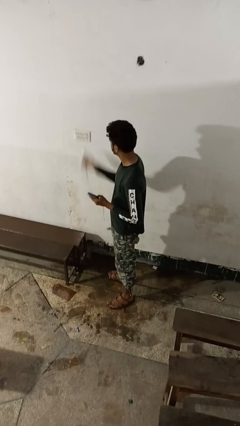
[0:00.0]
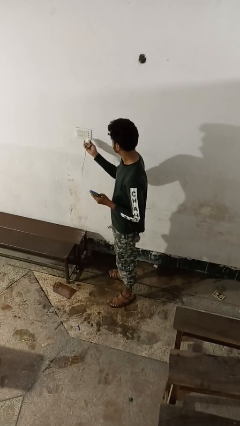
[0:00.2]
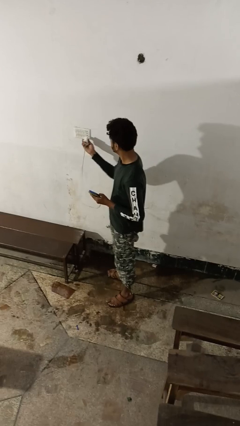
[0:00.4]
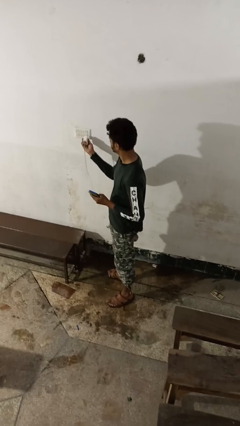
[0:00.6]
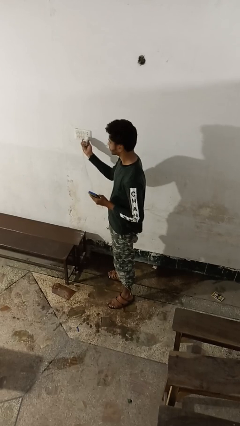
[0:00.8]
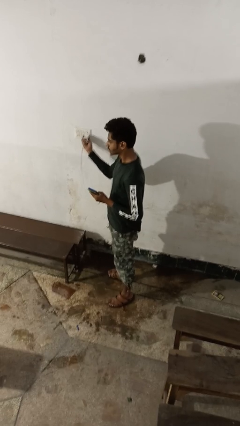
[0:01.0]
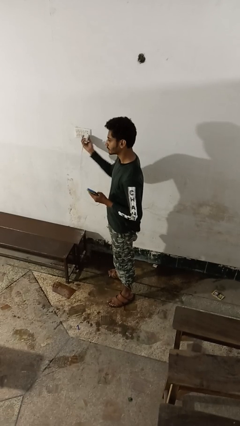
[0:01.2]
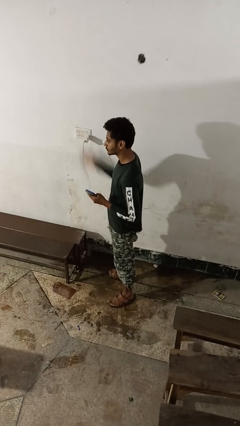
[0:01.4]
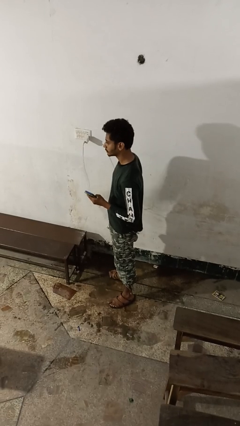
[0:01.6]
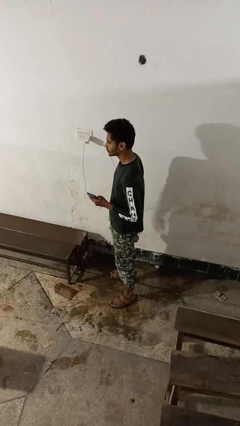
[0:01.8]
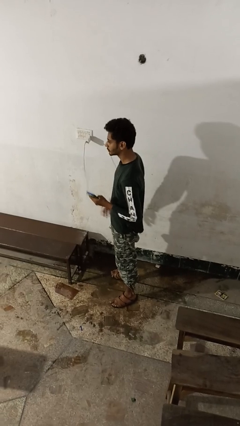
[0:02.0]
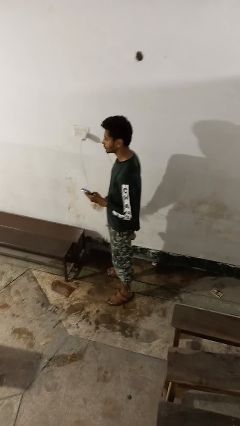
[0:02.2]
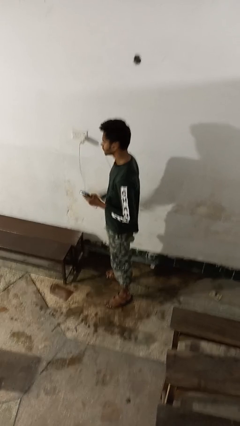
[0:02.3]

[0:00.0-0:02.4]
person plugs into electrical socket

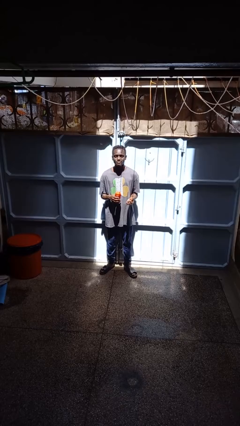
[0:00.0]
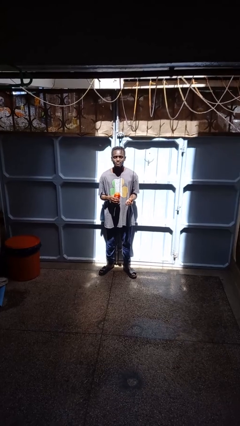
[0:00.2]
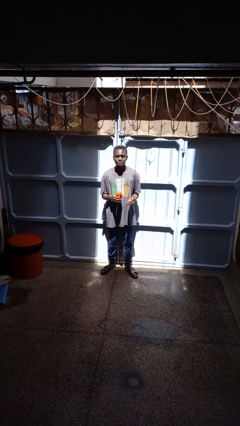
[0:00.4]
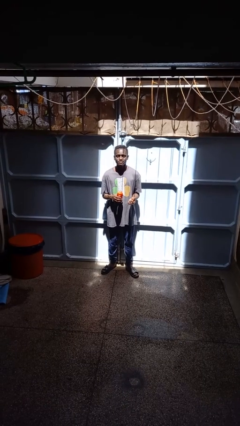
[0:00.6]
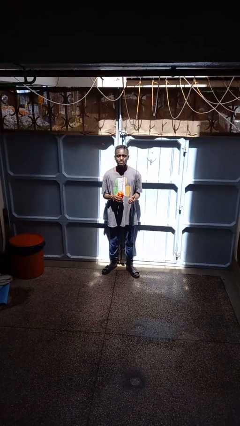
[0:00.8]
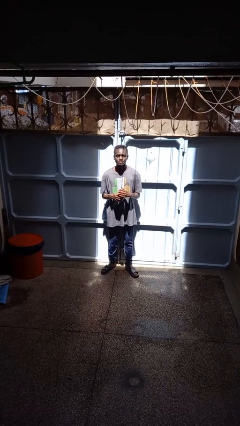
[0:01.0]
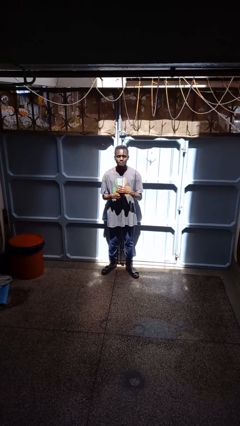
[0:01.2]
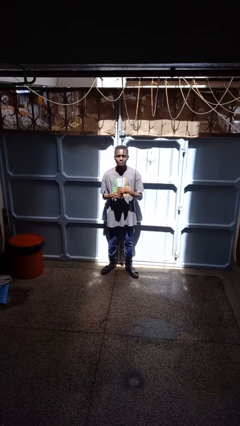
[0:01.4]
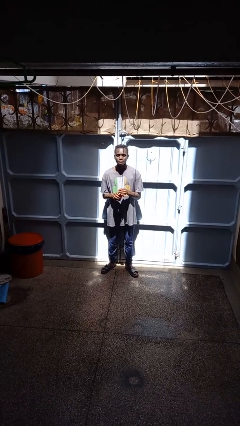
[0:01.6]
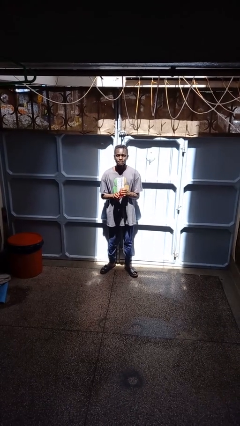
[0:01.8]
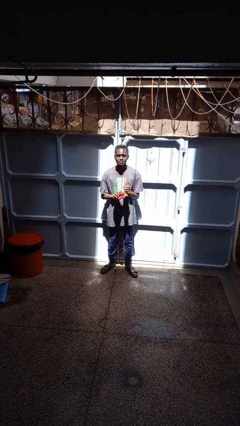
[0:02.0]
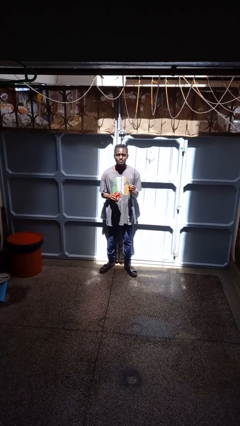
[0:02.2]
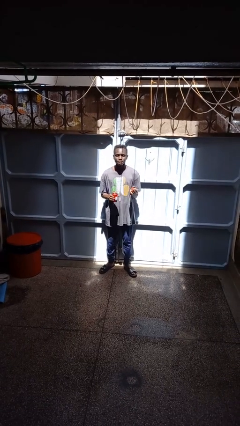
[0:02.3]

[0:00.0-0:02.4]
person opens jar

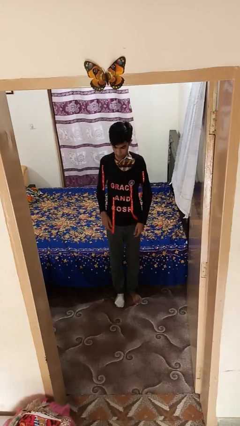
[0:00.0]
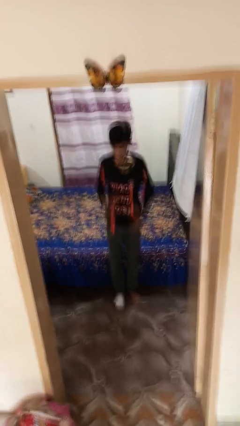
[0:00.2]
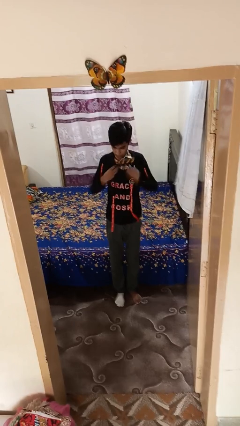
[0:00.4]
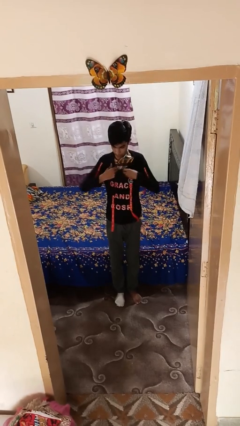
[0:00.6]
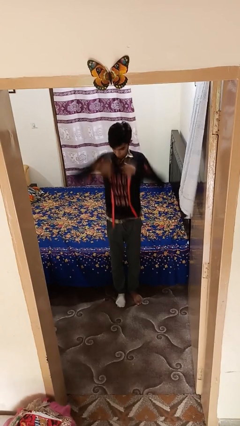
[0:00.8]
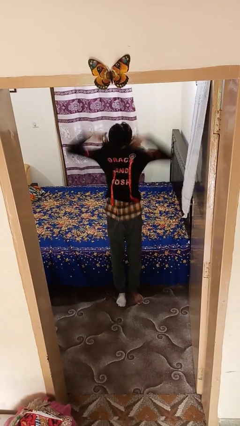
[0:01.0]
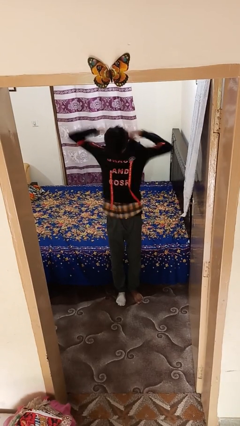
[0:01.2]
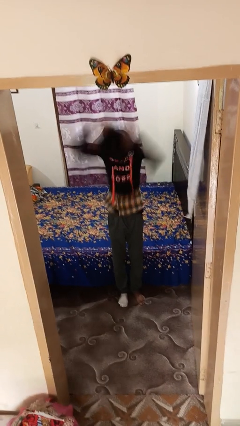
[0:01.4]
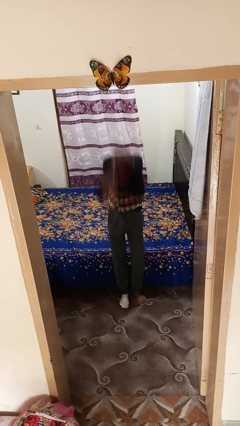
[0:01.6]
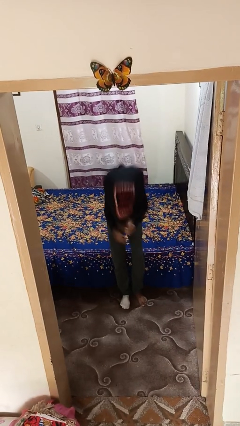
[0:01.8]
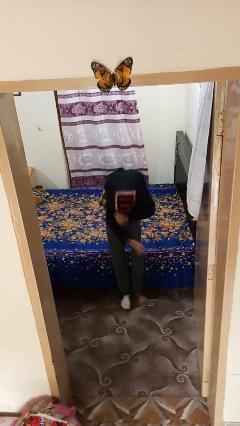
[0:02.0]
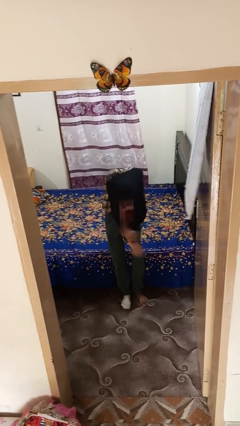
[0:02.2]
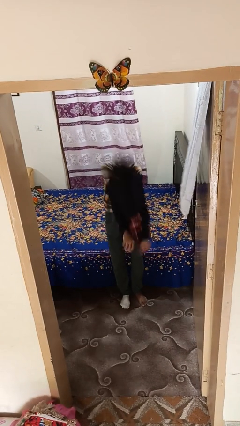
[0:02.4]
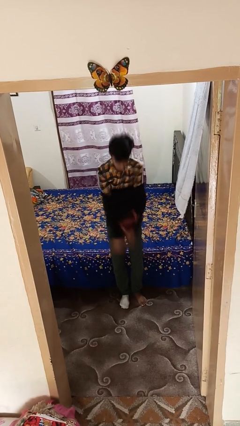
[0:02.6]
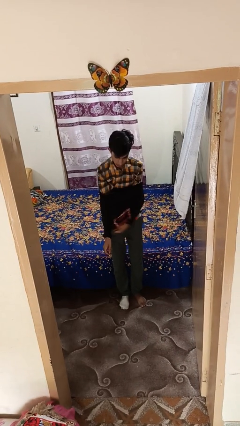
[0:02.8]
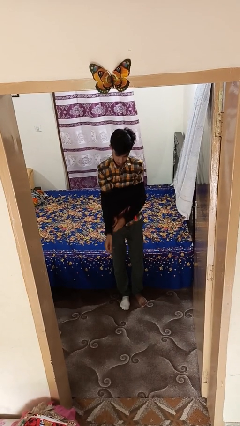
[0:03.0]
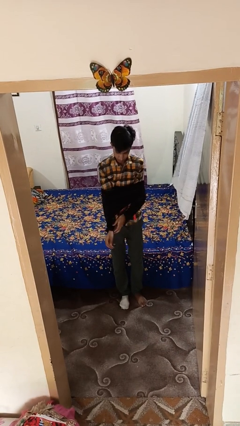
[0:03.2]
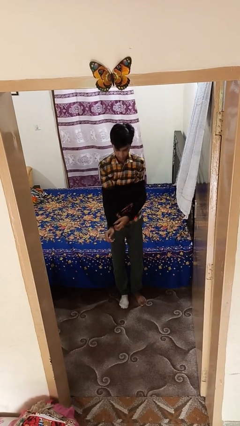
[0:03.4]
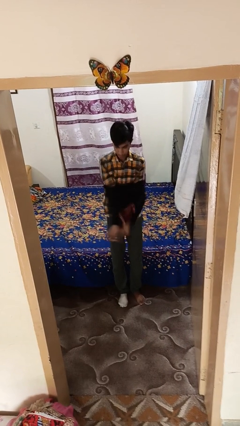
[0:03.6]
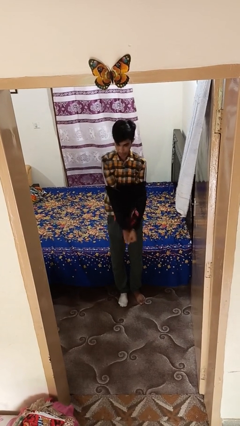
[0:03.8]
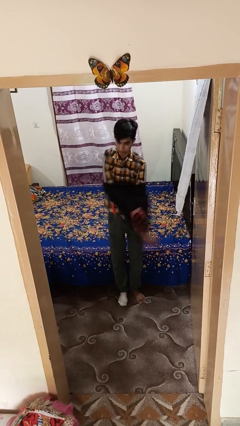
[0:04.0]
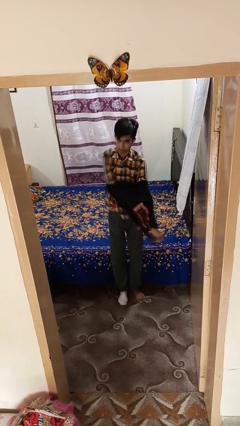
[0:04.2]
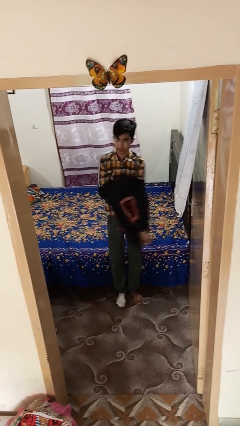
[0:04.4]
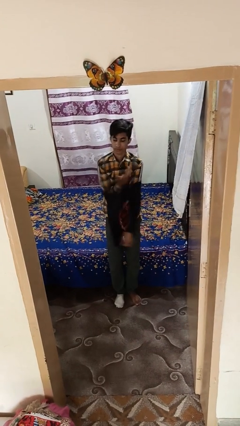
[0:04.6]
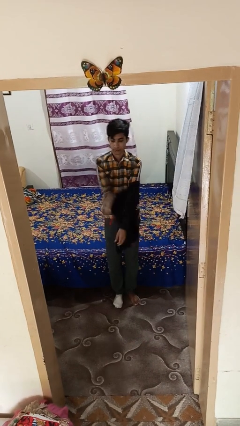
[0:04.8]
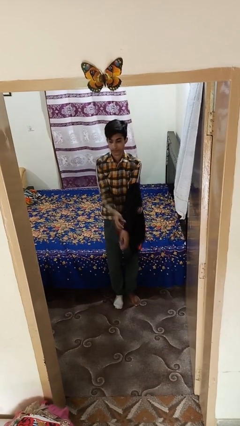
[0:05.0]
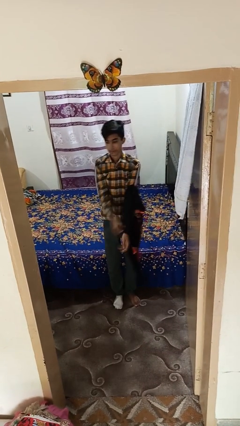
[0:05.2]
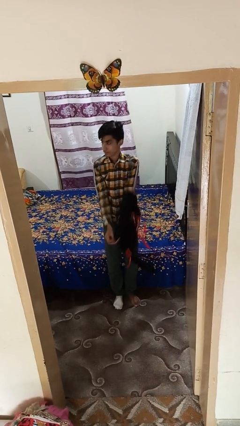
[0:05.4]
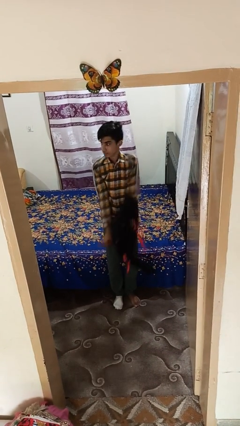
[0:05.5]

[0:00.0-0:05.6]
person takes off shirt

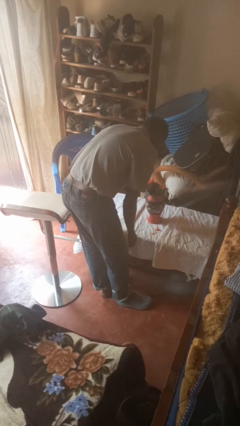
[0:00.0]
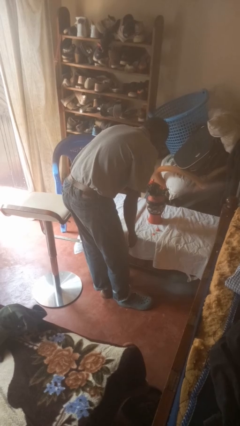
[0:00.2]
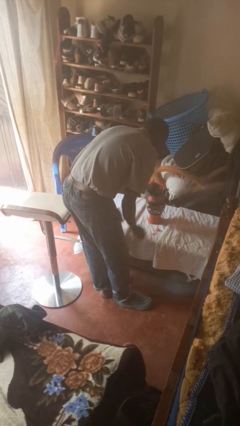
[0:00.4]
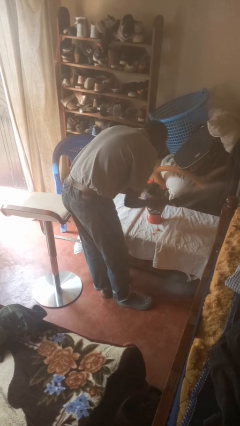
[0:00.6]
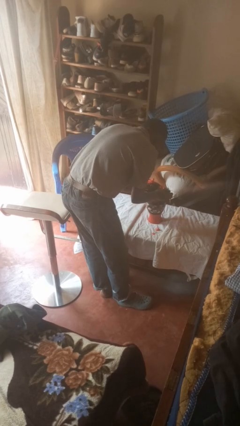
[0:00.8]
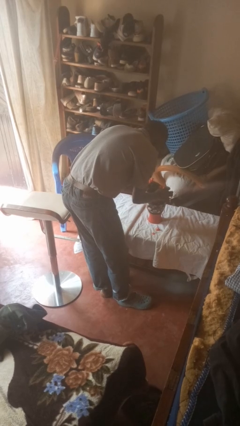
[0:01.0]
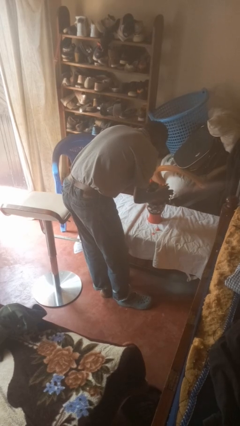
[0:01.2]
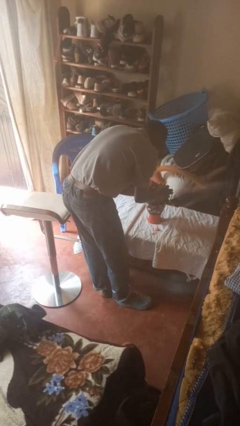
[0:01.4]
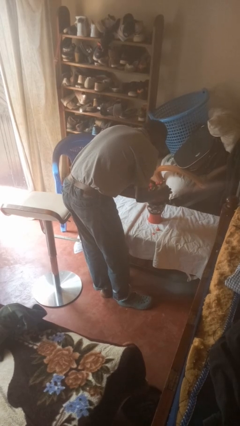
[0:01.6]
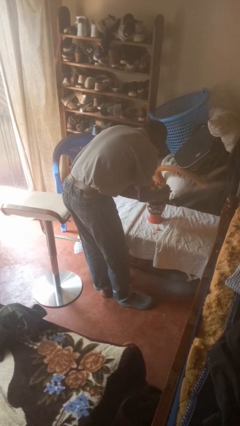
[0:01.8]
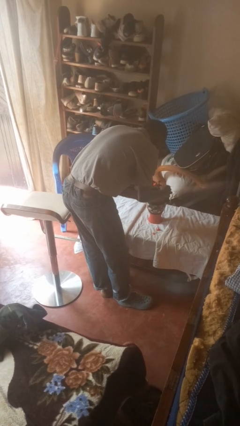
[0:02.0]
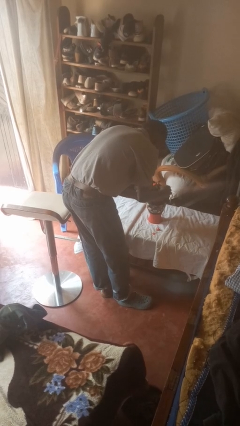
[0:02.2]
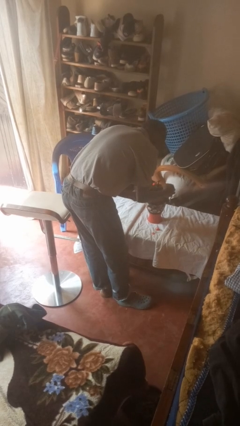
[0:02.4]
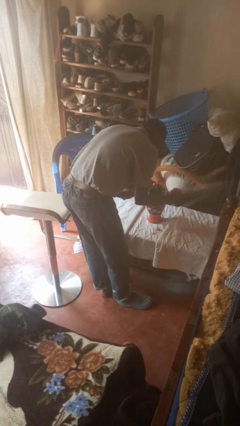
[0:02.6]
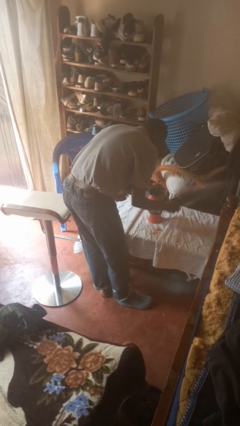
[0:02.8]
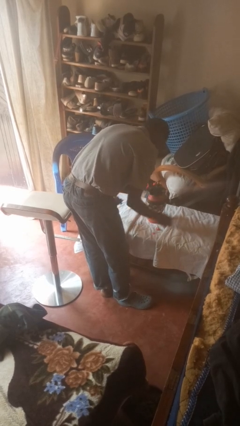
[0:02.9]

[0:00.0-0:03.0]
person arranges flowers in vase

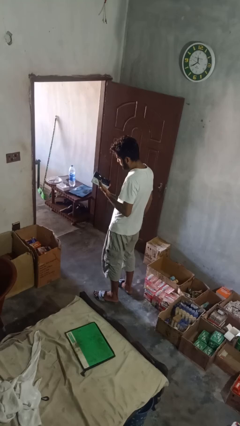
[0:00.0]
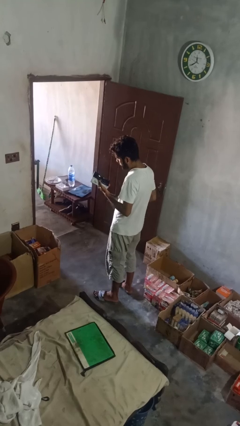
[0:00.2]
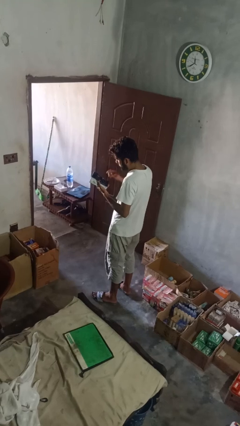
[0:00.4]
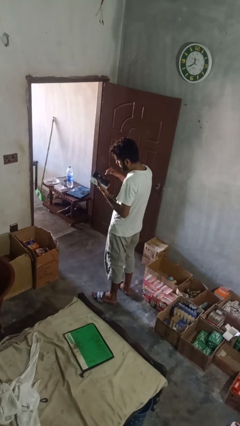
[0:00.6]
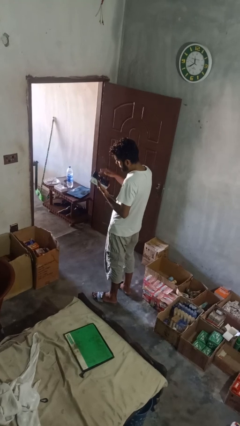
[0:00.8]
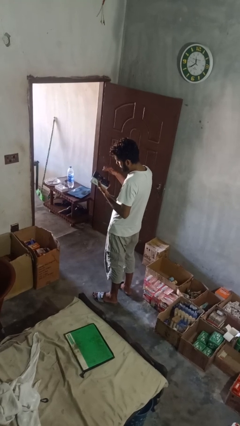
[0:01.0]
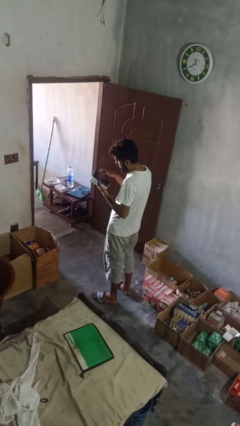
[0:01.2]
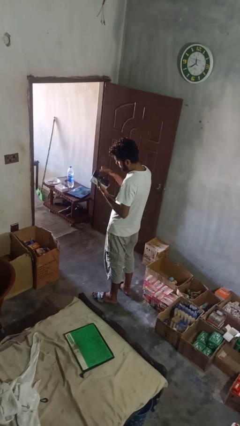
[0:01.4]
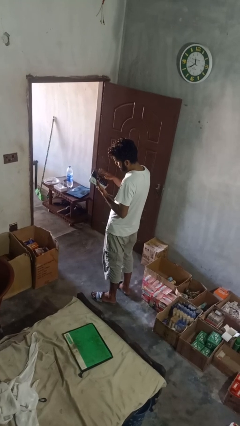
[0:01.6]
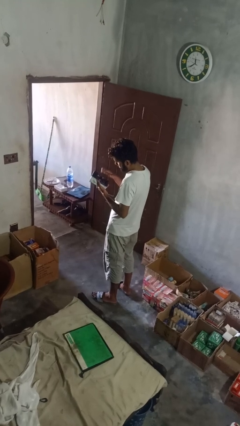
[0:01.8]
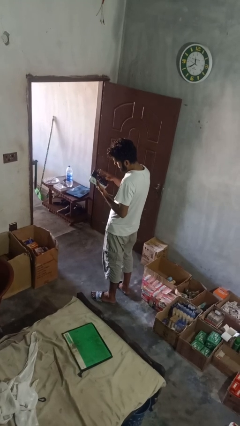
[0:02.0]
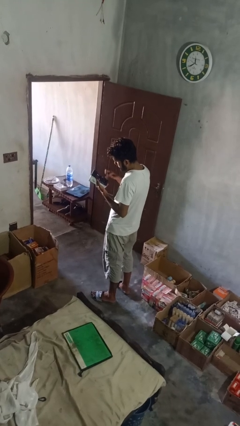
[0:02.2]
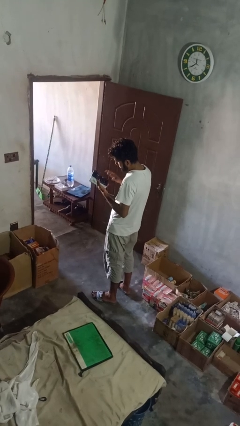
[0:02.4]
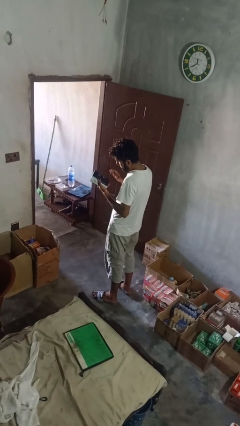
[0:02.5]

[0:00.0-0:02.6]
person interacts with tablet

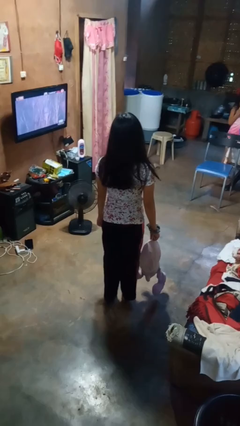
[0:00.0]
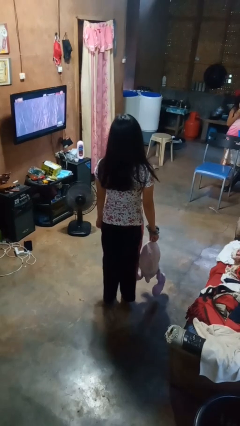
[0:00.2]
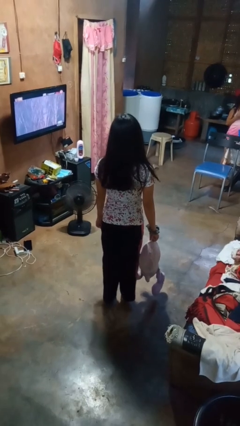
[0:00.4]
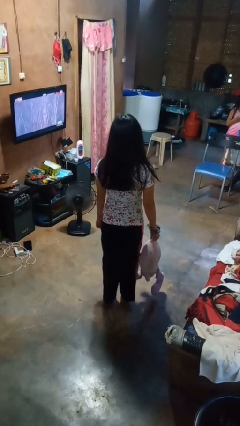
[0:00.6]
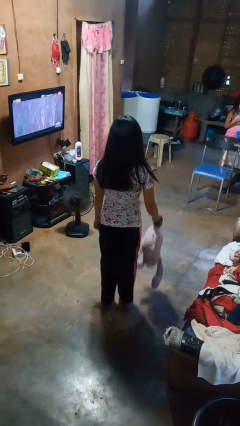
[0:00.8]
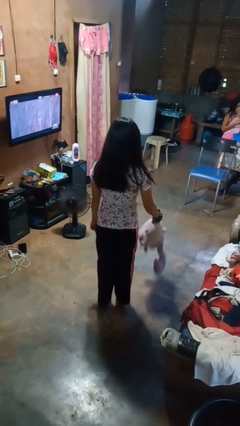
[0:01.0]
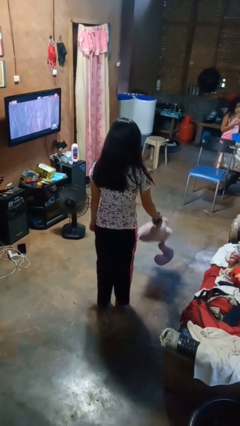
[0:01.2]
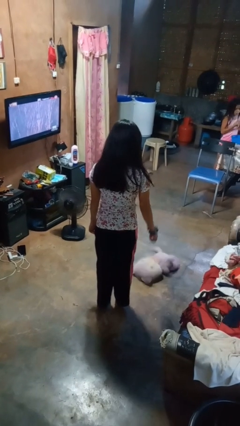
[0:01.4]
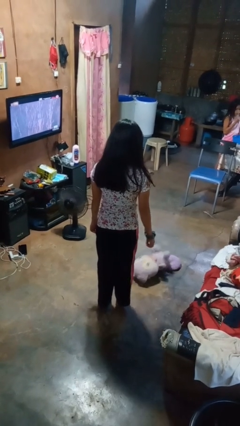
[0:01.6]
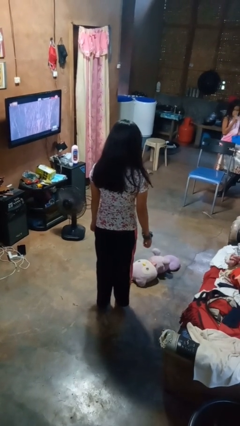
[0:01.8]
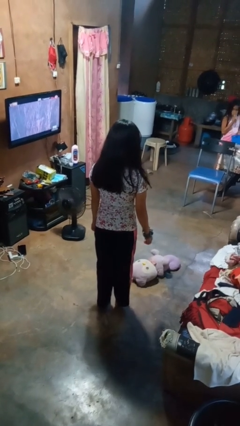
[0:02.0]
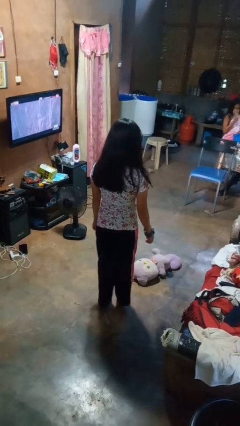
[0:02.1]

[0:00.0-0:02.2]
person throws object to ground
